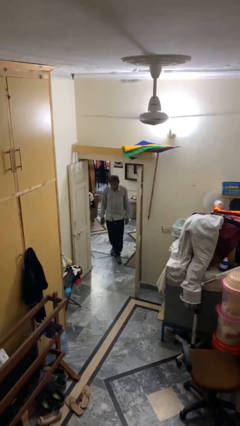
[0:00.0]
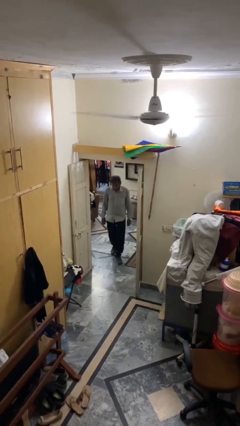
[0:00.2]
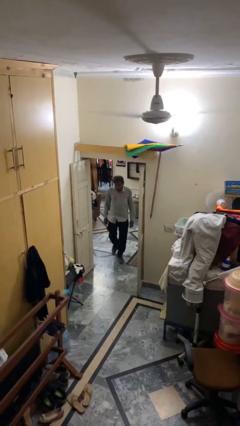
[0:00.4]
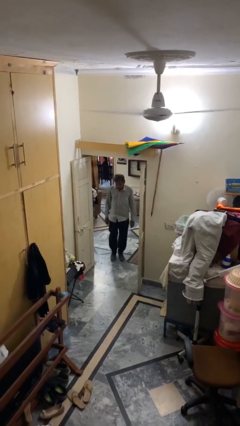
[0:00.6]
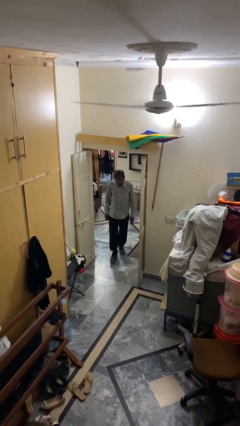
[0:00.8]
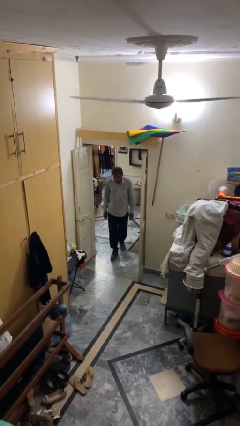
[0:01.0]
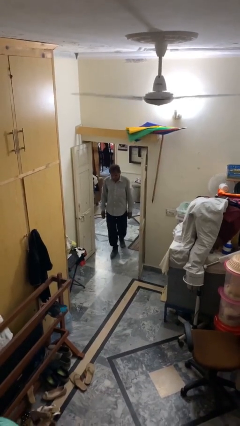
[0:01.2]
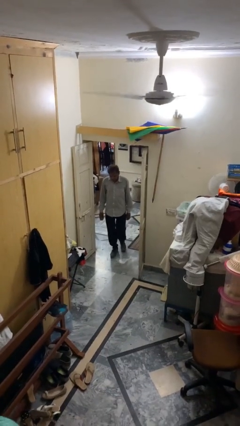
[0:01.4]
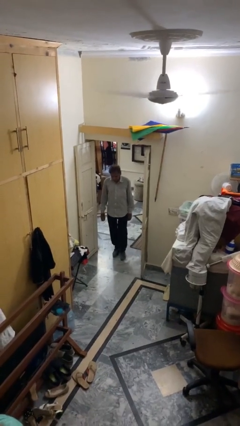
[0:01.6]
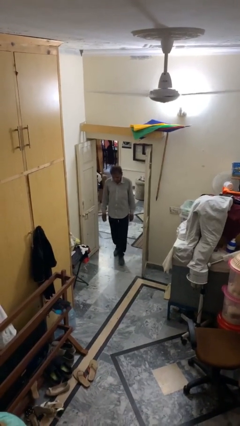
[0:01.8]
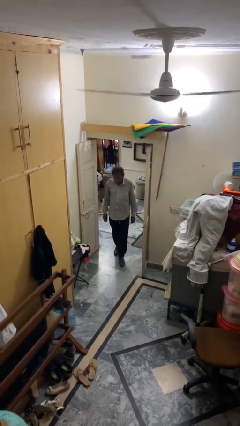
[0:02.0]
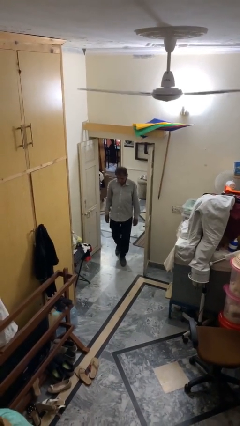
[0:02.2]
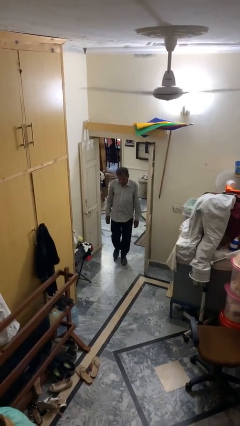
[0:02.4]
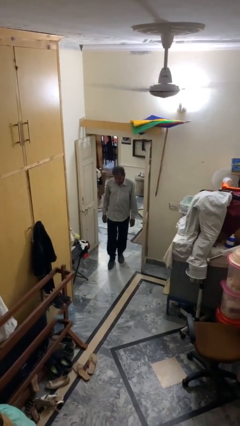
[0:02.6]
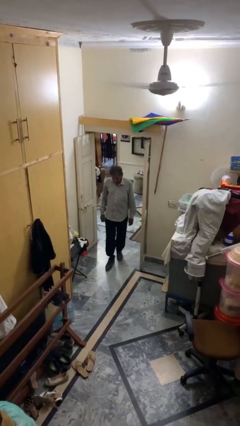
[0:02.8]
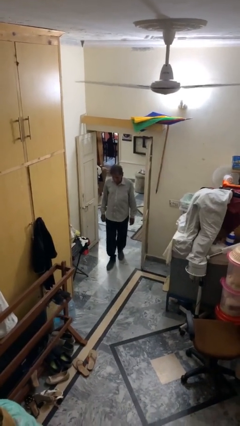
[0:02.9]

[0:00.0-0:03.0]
person enters scene through structure

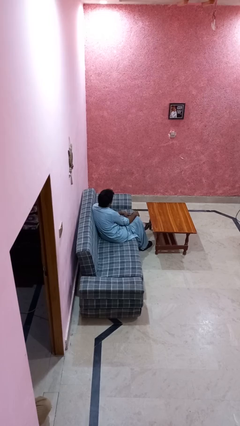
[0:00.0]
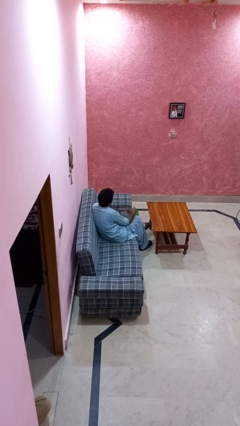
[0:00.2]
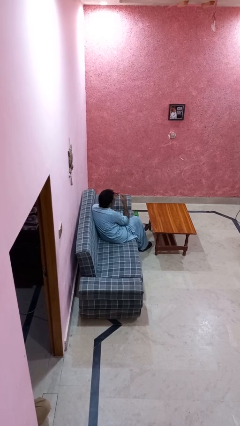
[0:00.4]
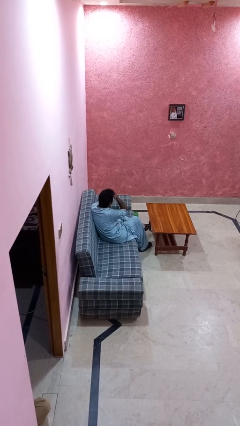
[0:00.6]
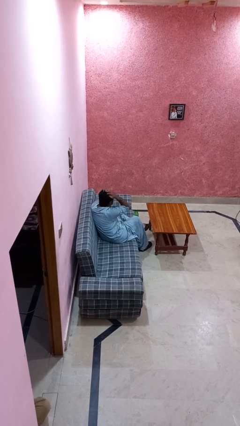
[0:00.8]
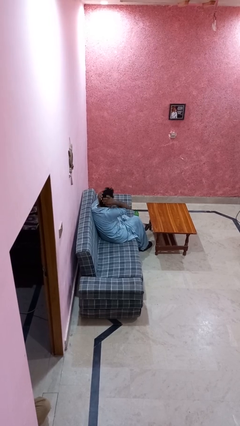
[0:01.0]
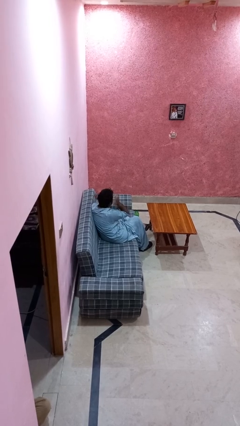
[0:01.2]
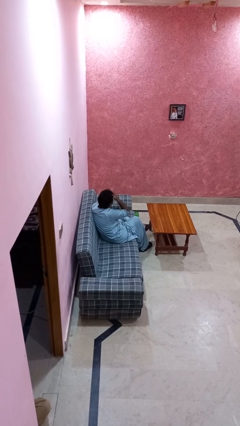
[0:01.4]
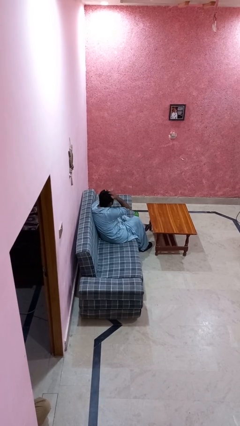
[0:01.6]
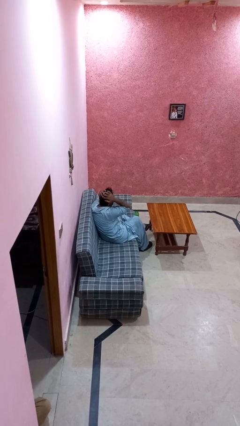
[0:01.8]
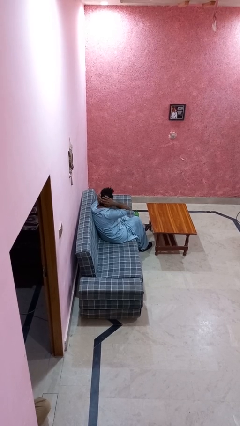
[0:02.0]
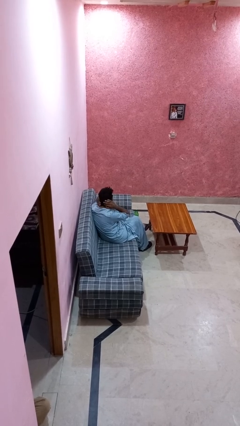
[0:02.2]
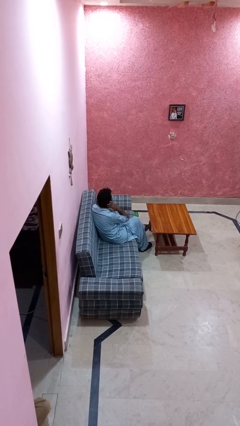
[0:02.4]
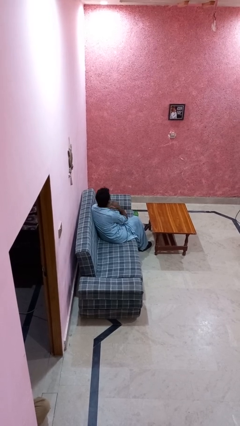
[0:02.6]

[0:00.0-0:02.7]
person strokes hair

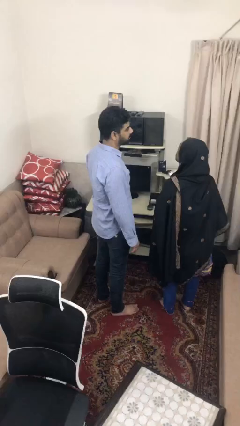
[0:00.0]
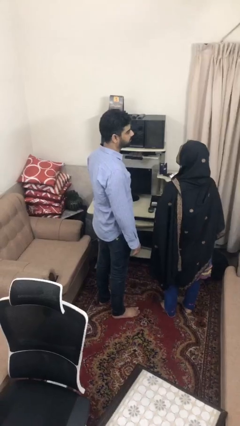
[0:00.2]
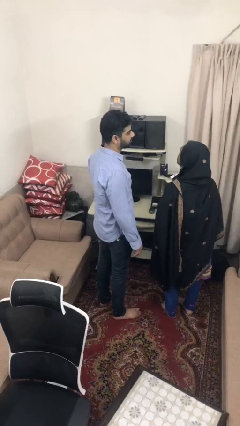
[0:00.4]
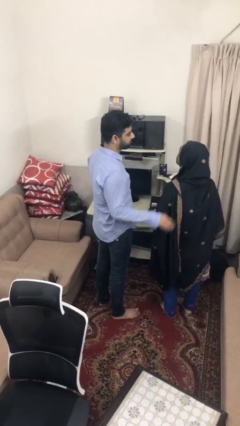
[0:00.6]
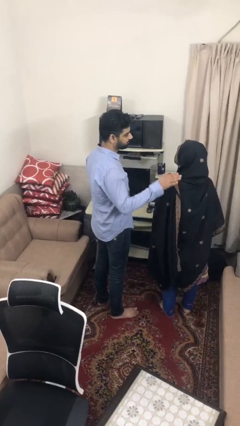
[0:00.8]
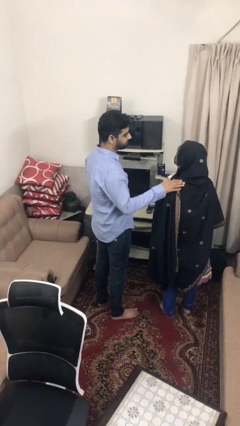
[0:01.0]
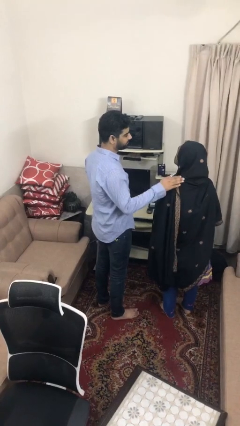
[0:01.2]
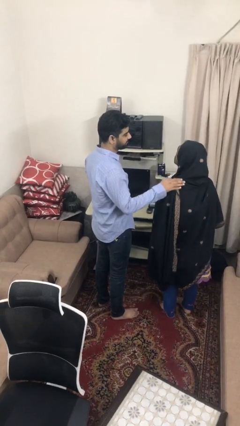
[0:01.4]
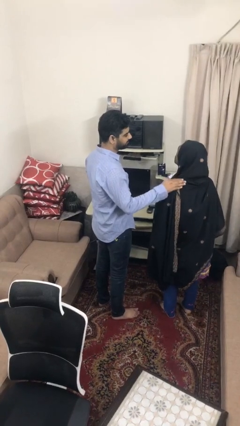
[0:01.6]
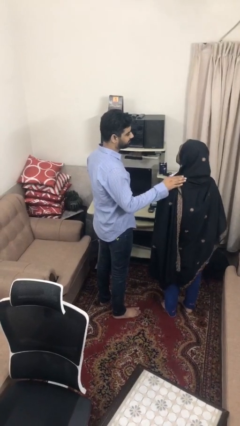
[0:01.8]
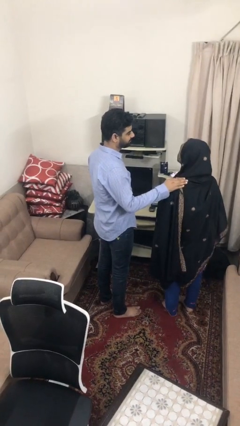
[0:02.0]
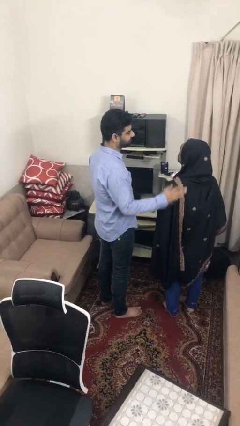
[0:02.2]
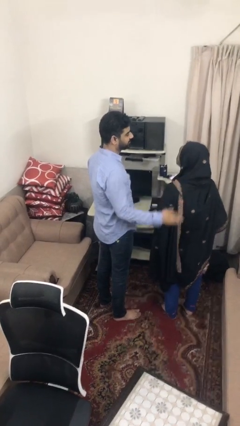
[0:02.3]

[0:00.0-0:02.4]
person pounds shoulders of person

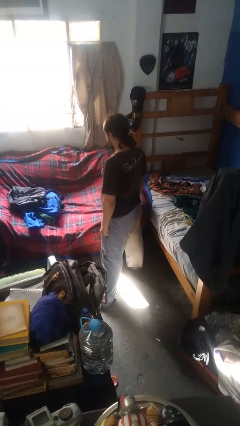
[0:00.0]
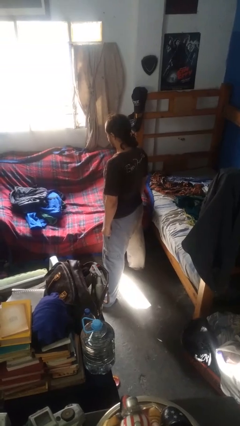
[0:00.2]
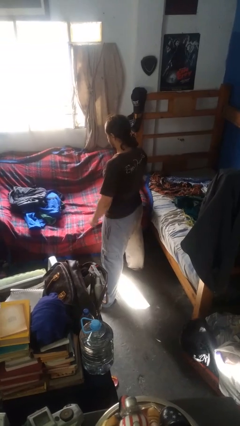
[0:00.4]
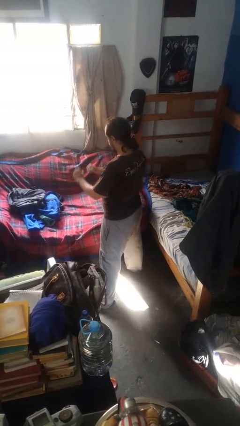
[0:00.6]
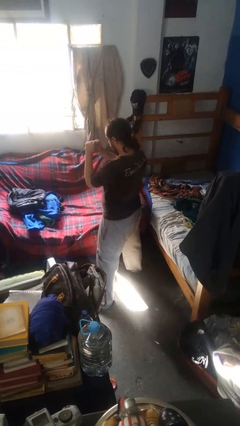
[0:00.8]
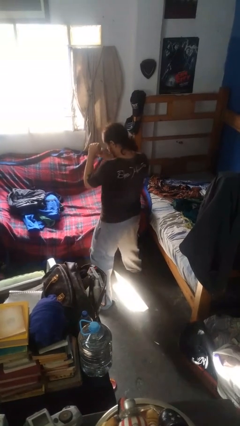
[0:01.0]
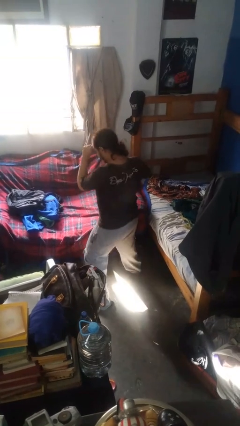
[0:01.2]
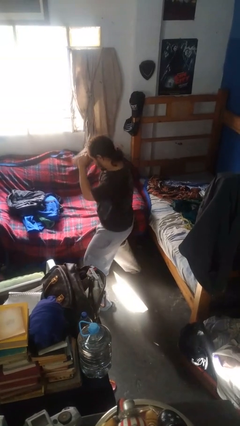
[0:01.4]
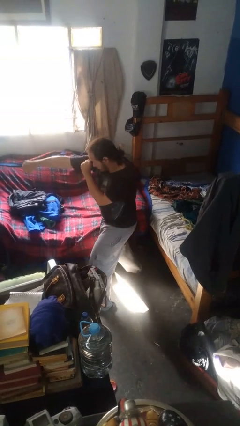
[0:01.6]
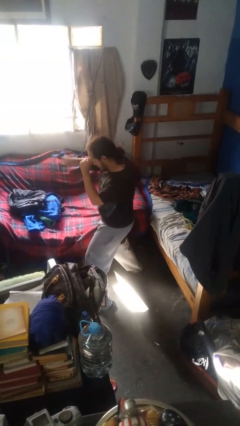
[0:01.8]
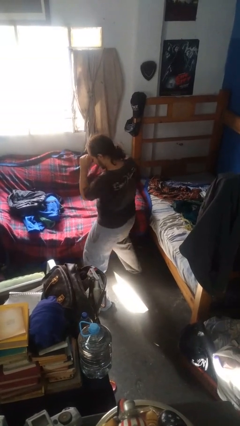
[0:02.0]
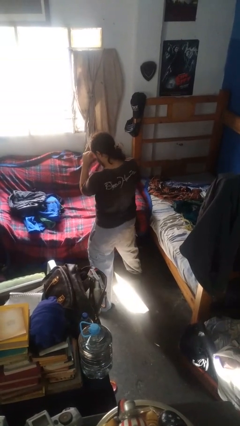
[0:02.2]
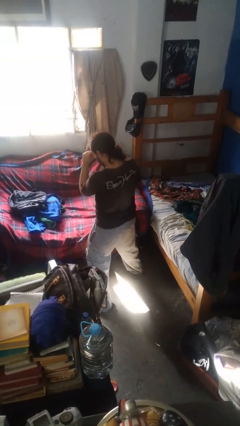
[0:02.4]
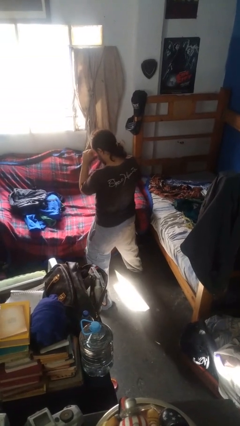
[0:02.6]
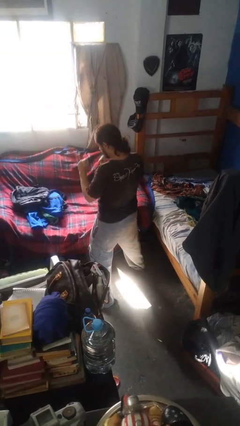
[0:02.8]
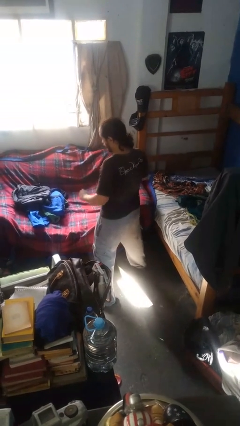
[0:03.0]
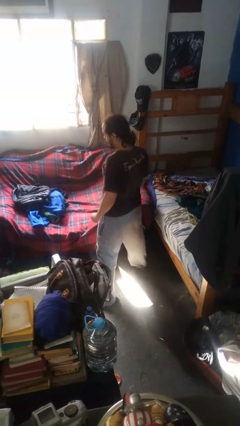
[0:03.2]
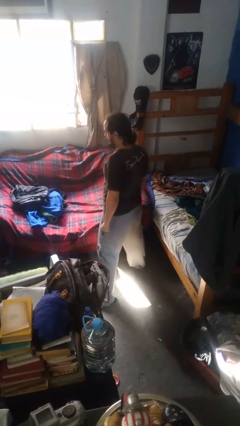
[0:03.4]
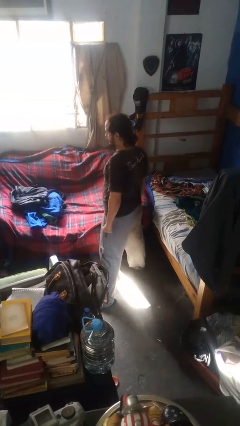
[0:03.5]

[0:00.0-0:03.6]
person punches

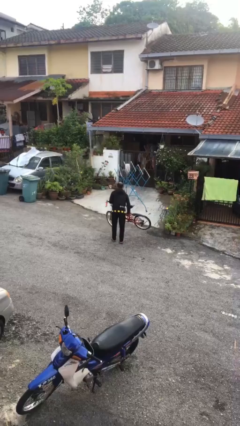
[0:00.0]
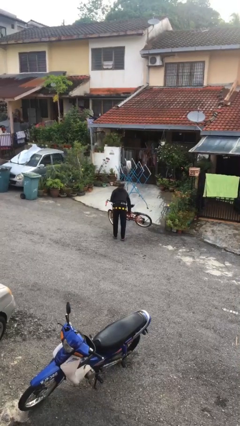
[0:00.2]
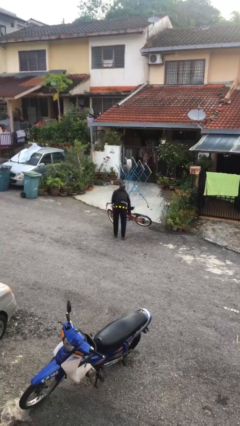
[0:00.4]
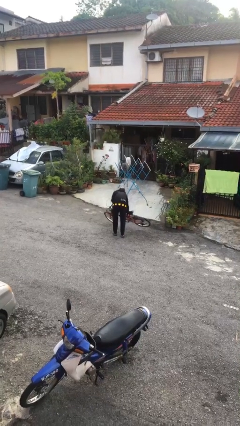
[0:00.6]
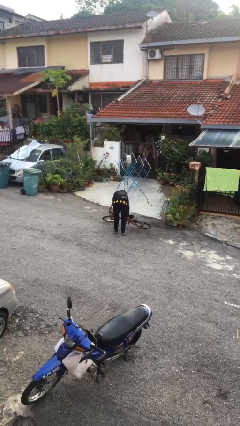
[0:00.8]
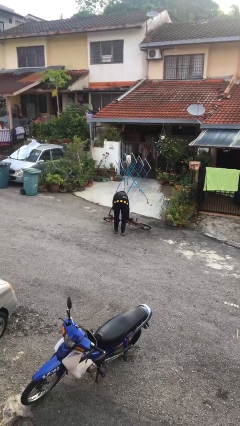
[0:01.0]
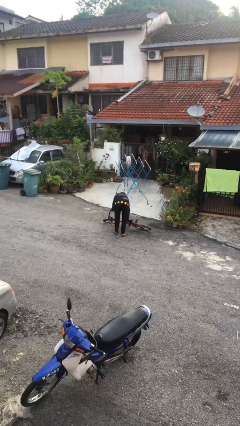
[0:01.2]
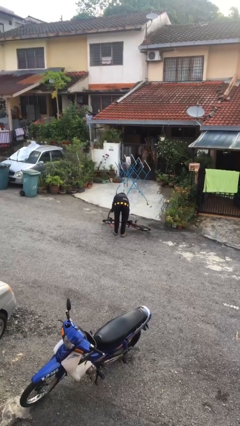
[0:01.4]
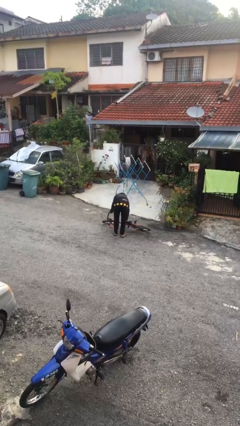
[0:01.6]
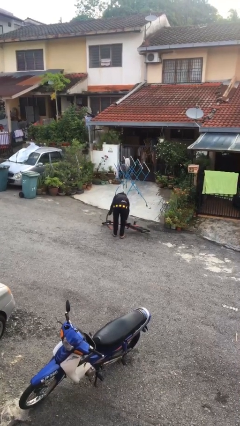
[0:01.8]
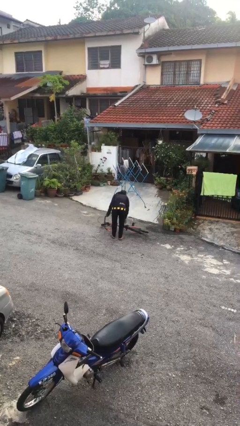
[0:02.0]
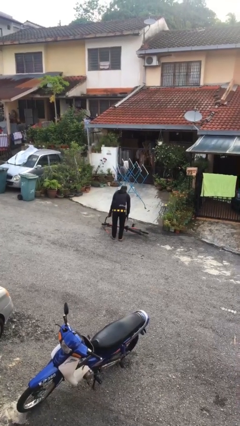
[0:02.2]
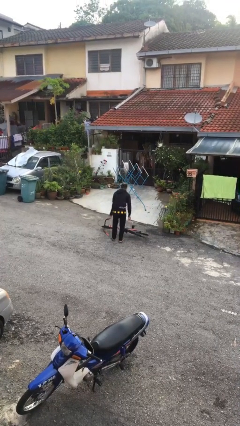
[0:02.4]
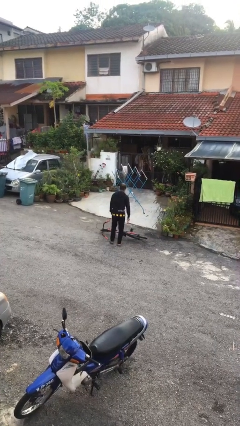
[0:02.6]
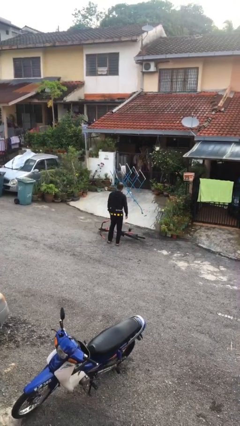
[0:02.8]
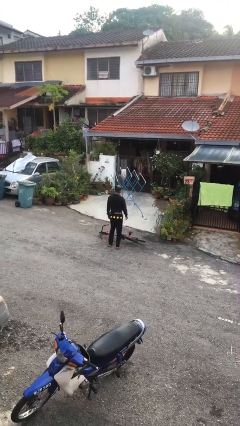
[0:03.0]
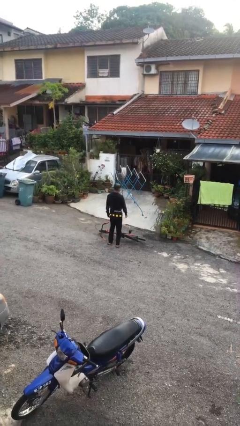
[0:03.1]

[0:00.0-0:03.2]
person puts down object on floor

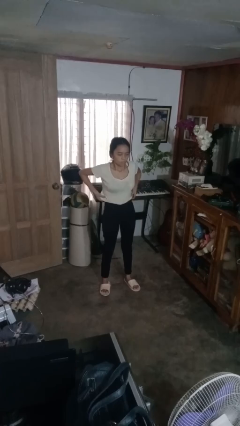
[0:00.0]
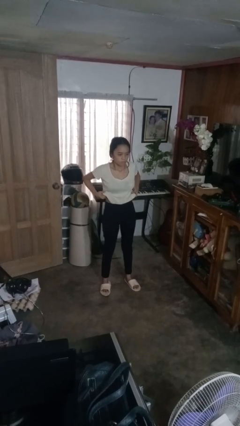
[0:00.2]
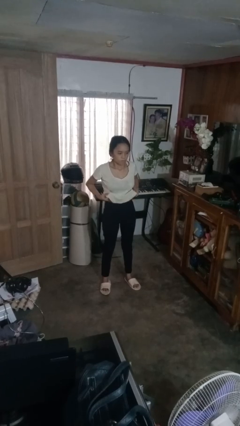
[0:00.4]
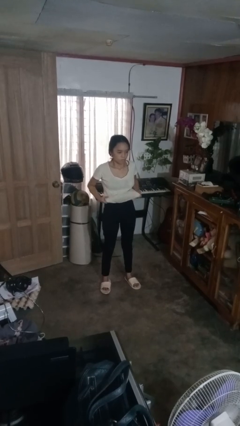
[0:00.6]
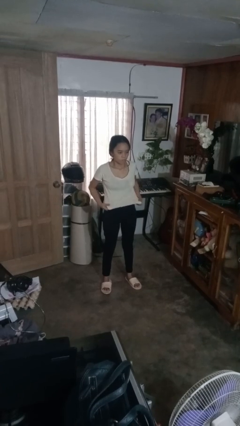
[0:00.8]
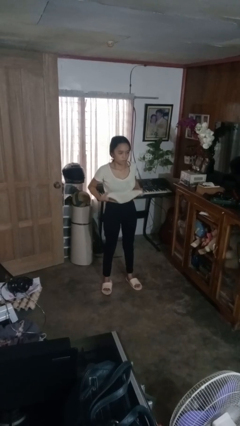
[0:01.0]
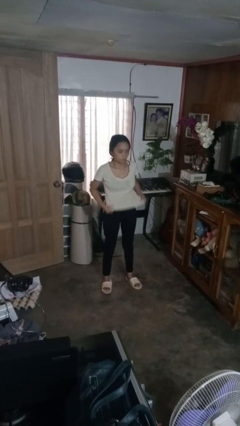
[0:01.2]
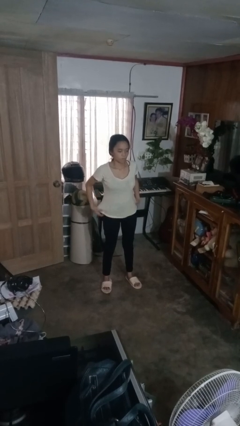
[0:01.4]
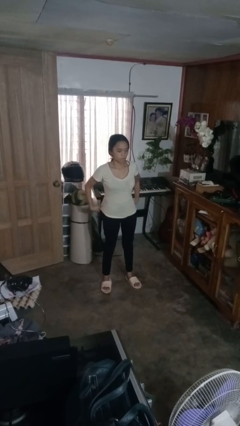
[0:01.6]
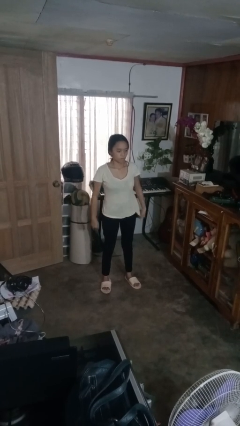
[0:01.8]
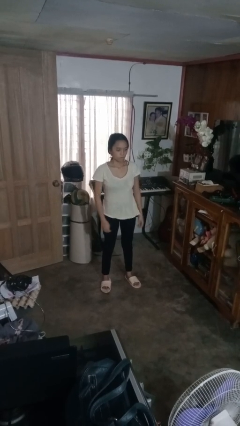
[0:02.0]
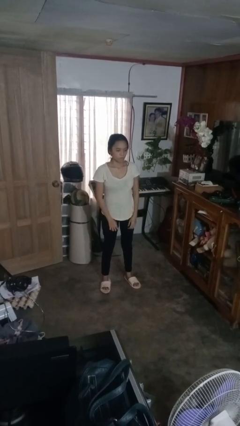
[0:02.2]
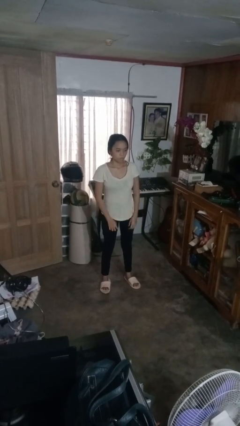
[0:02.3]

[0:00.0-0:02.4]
person untucks shirt

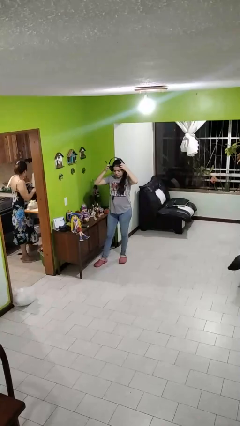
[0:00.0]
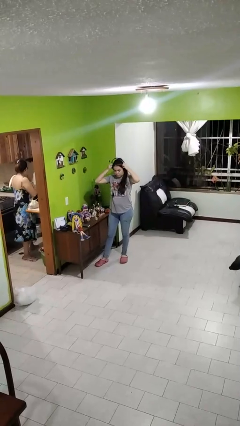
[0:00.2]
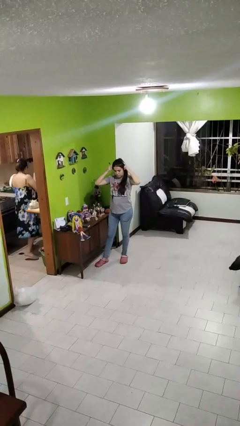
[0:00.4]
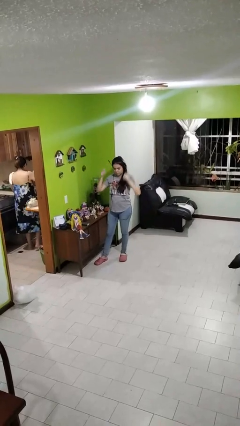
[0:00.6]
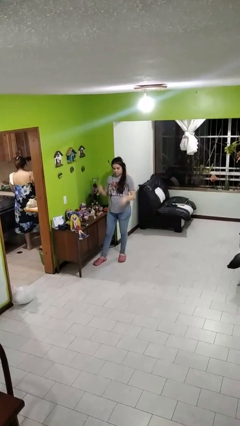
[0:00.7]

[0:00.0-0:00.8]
person puts on headphones
